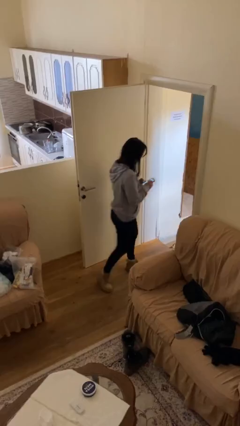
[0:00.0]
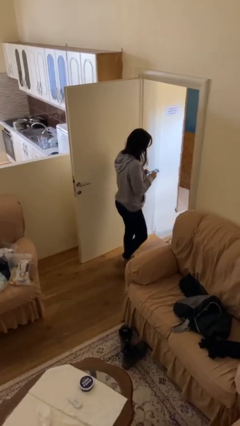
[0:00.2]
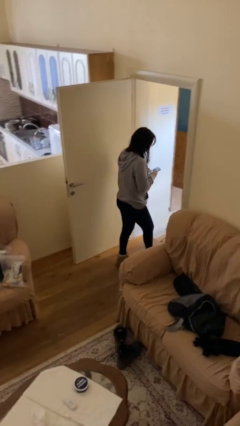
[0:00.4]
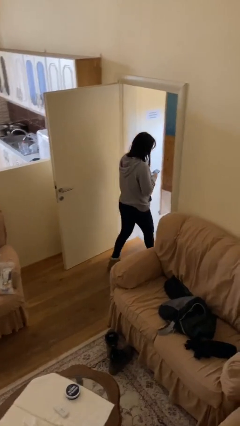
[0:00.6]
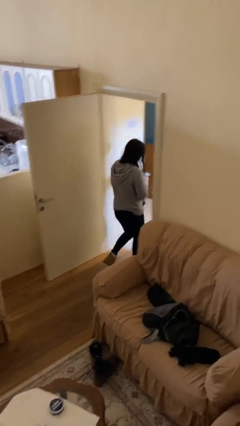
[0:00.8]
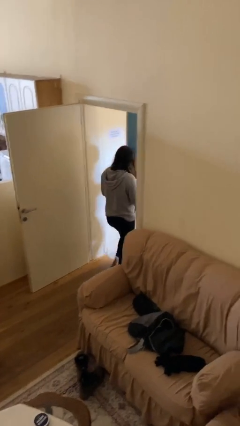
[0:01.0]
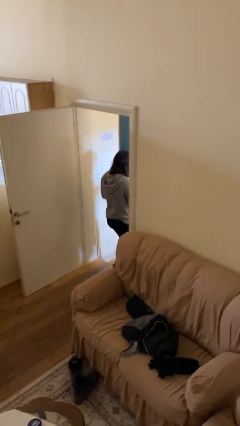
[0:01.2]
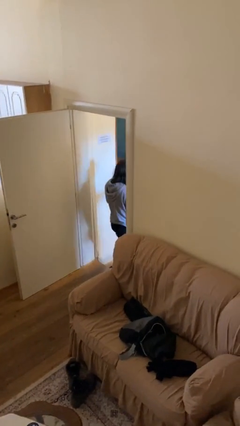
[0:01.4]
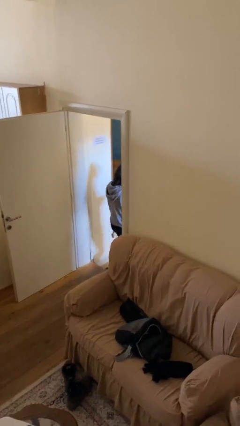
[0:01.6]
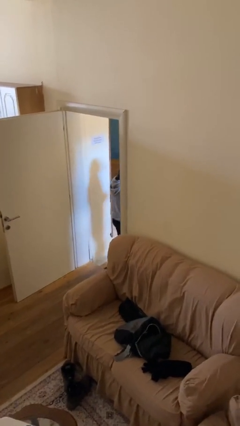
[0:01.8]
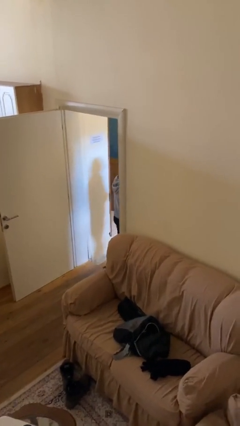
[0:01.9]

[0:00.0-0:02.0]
person exits scene through structure

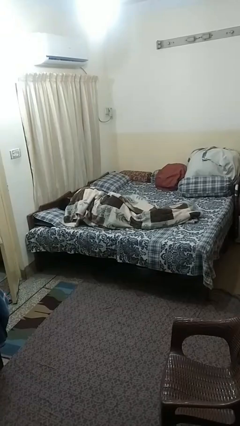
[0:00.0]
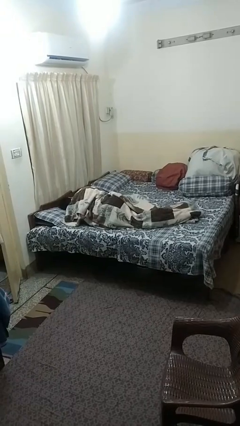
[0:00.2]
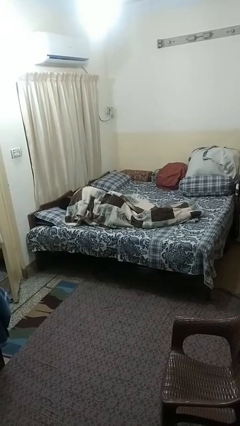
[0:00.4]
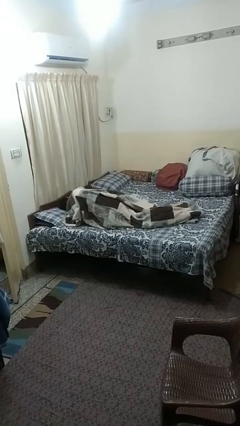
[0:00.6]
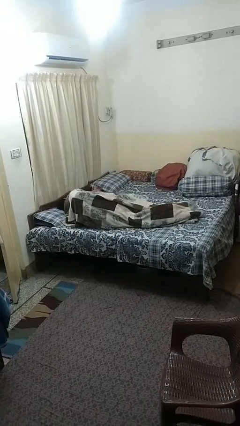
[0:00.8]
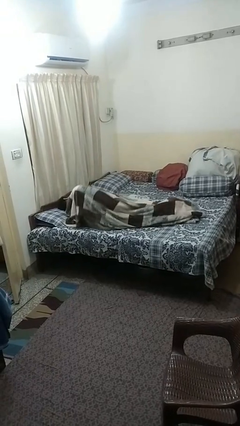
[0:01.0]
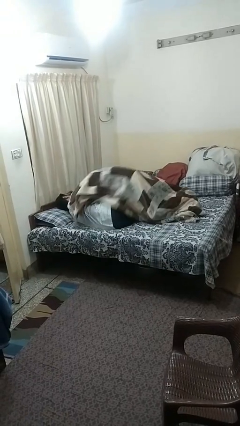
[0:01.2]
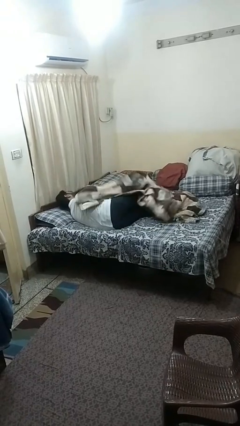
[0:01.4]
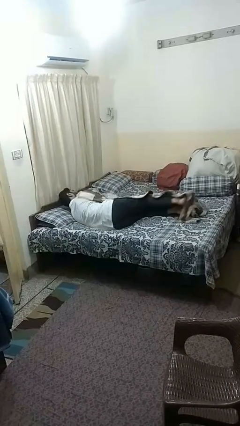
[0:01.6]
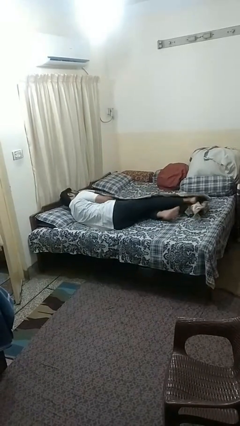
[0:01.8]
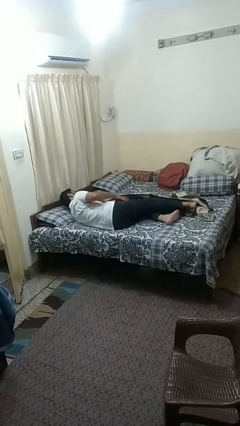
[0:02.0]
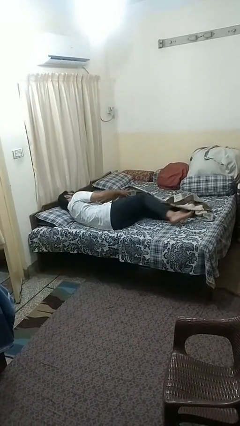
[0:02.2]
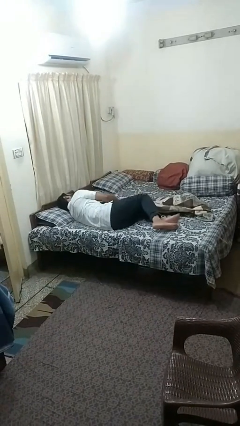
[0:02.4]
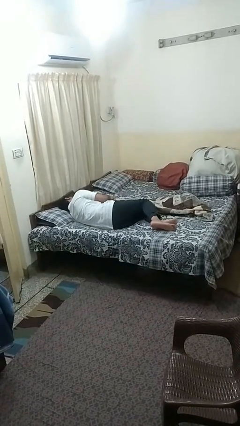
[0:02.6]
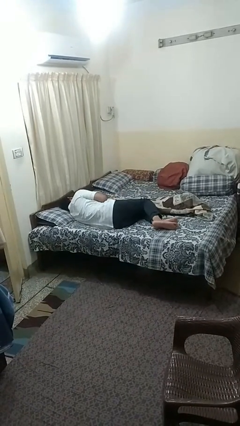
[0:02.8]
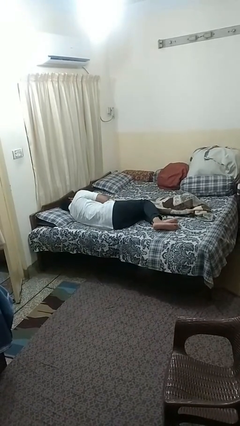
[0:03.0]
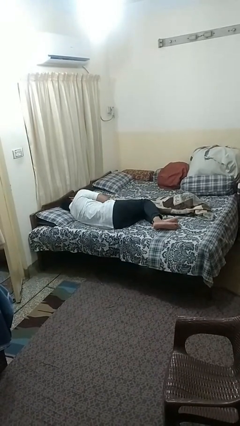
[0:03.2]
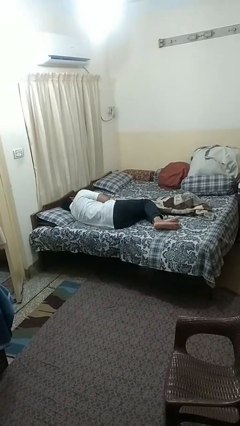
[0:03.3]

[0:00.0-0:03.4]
person uncovers with blanket

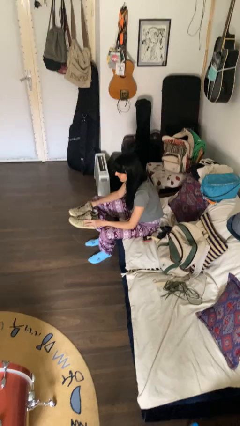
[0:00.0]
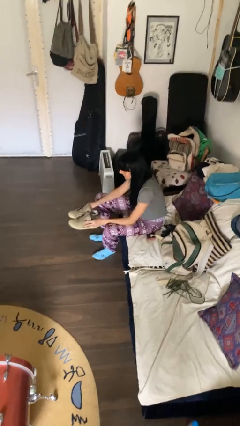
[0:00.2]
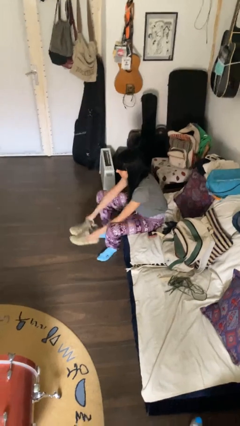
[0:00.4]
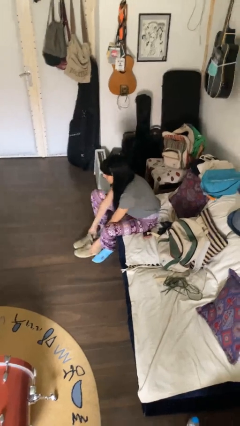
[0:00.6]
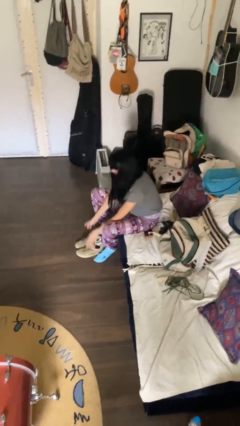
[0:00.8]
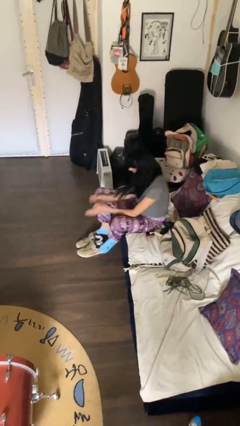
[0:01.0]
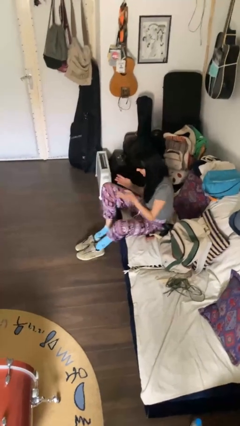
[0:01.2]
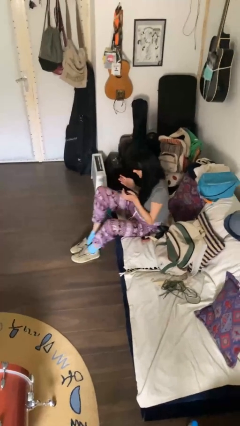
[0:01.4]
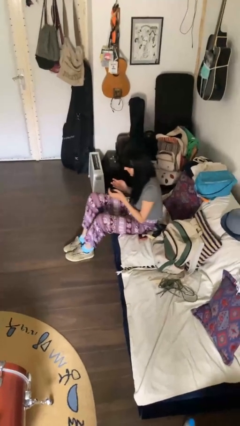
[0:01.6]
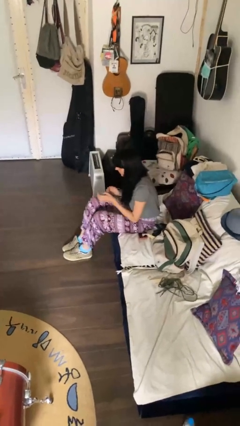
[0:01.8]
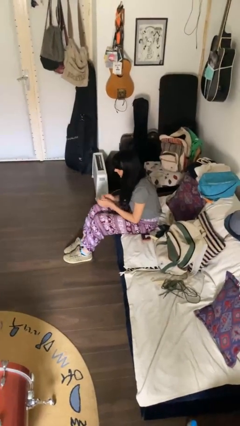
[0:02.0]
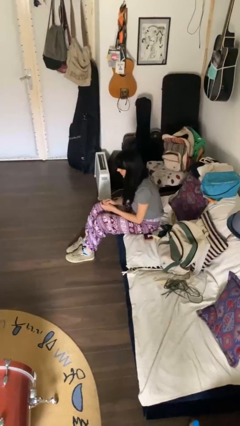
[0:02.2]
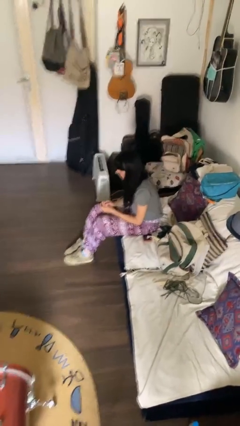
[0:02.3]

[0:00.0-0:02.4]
person puts on shoes

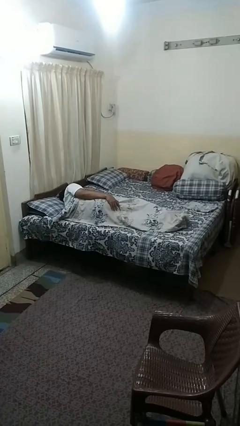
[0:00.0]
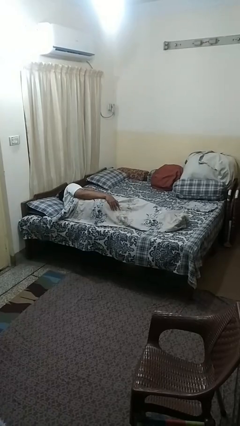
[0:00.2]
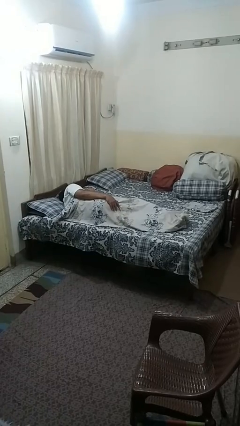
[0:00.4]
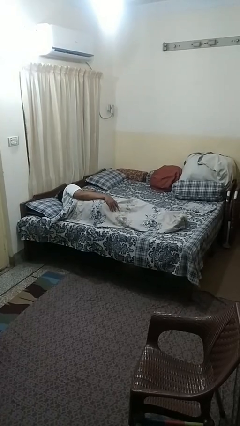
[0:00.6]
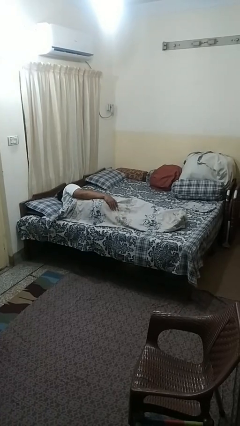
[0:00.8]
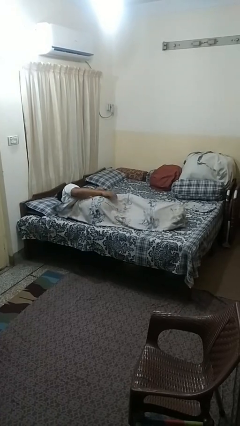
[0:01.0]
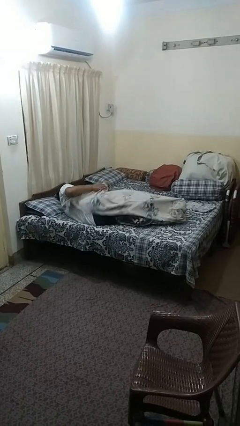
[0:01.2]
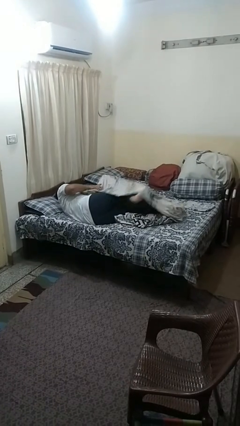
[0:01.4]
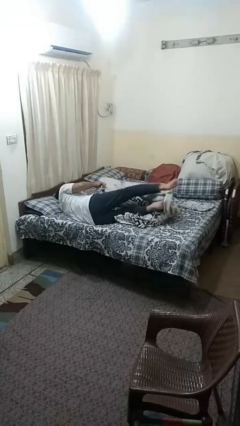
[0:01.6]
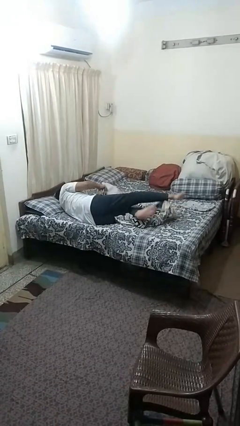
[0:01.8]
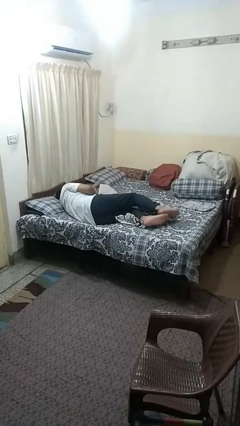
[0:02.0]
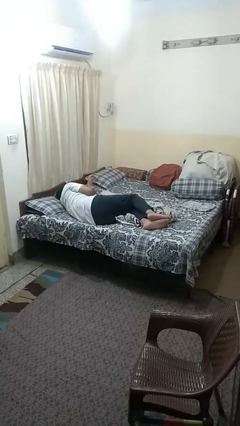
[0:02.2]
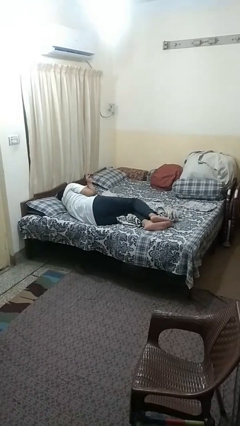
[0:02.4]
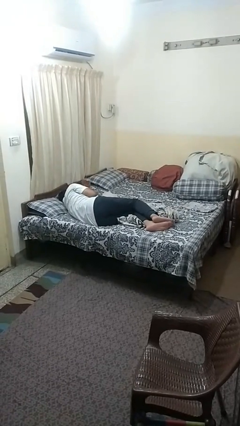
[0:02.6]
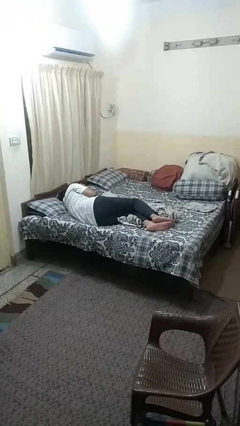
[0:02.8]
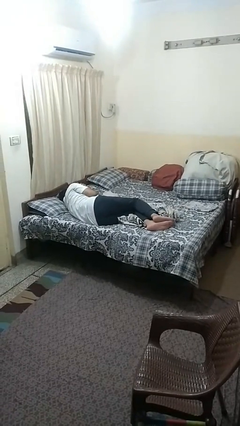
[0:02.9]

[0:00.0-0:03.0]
person uncovers with bedsheets

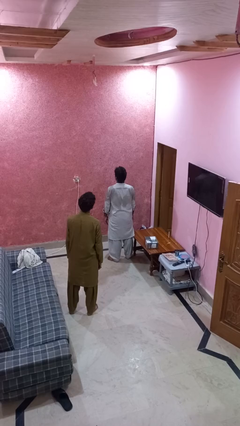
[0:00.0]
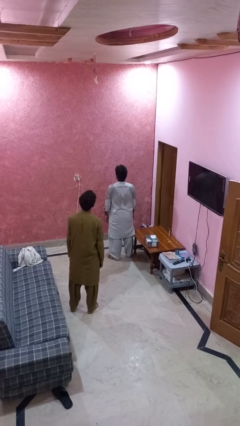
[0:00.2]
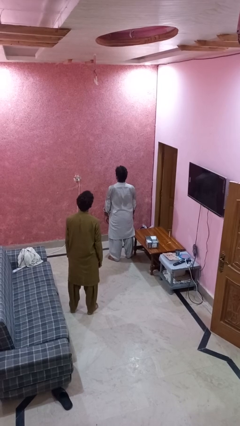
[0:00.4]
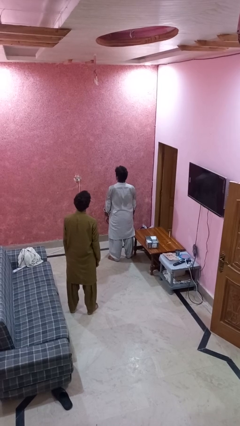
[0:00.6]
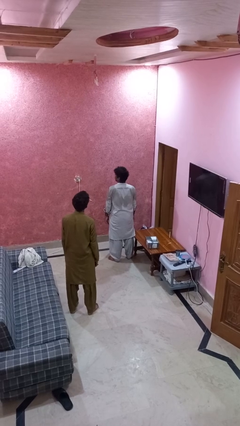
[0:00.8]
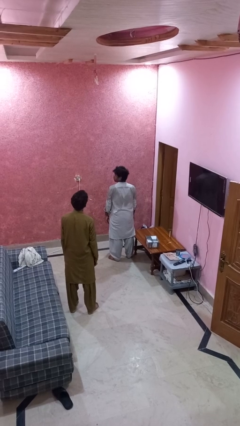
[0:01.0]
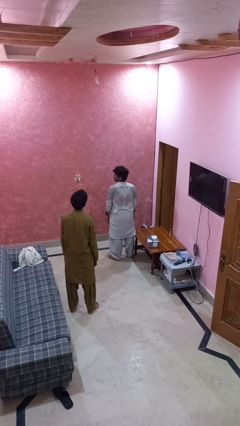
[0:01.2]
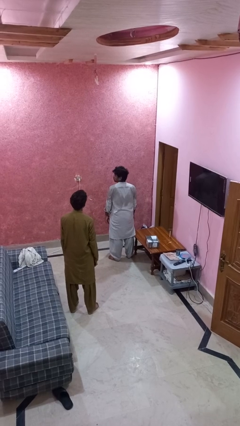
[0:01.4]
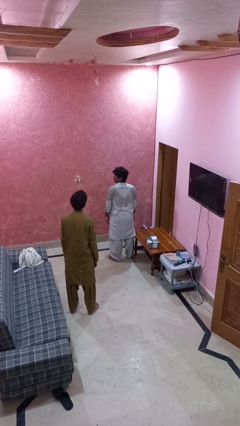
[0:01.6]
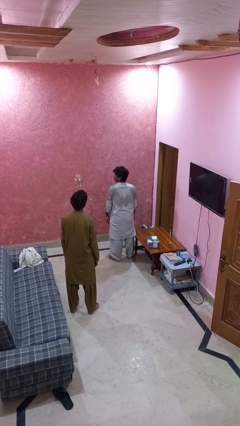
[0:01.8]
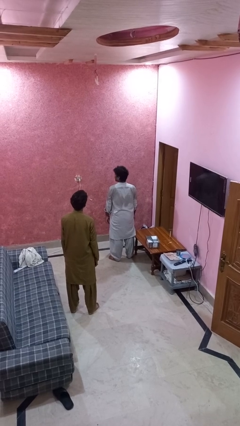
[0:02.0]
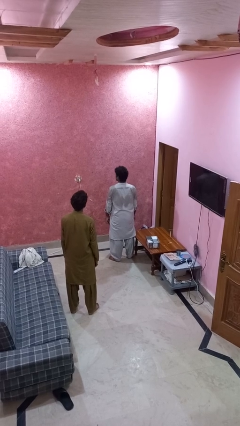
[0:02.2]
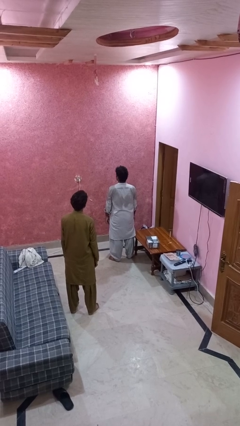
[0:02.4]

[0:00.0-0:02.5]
person looks over shoulder

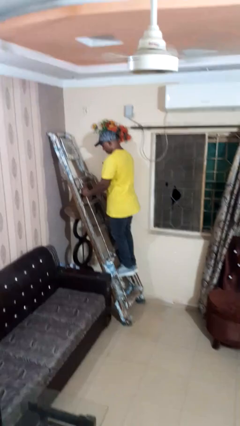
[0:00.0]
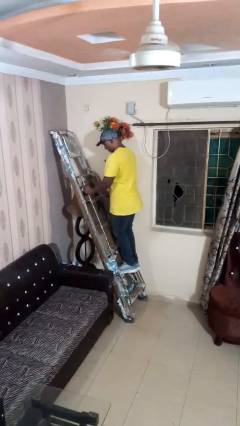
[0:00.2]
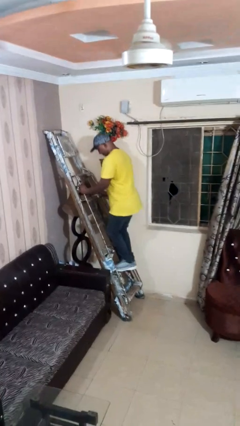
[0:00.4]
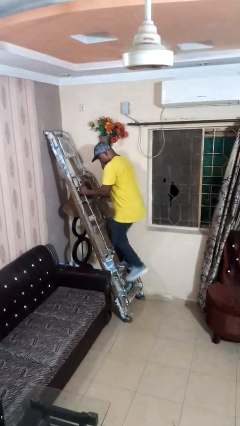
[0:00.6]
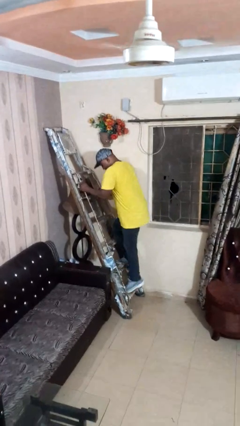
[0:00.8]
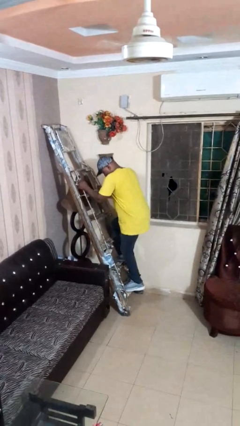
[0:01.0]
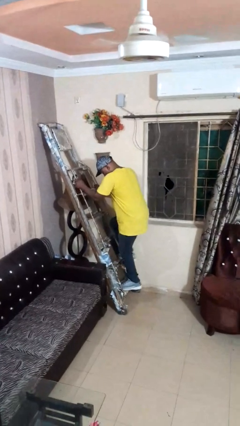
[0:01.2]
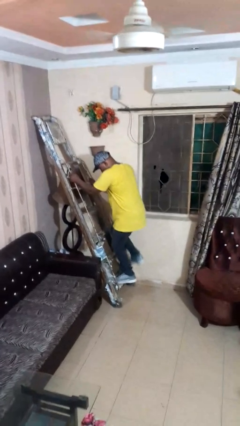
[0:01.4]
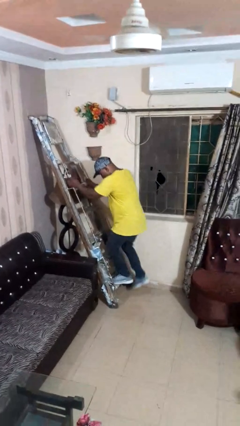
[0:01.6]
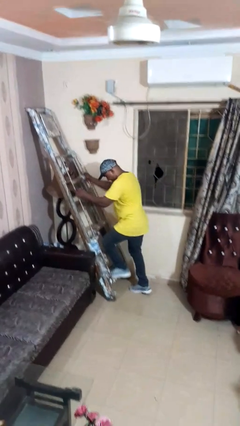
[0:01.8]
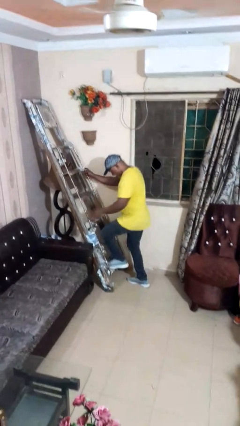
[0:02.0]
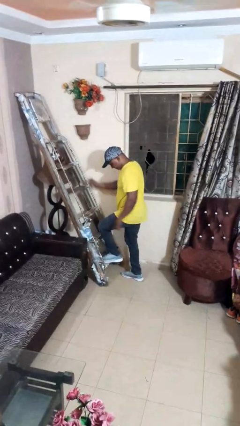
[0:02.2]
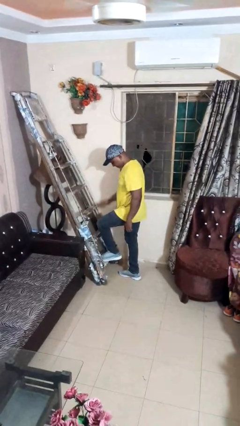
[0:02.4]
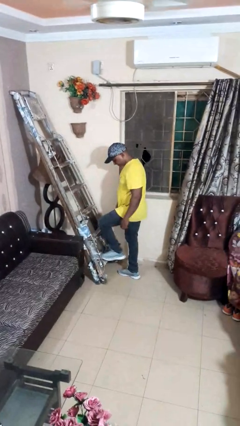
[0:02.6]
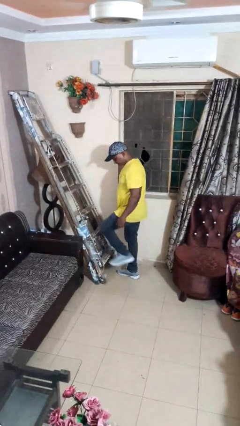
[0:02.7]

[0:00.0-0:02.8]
person climbs down ladder

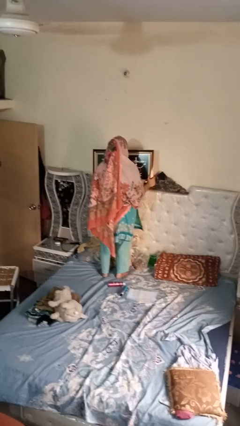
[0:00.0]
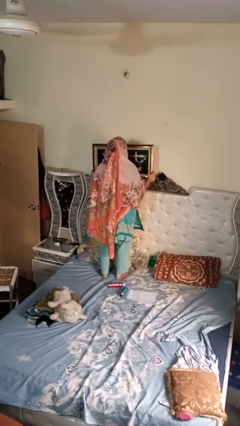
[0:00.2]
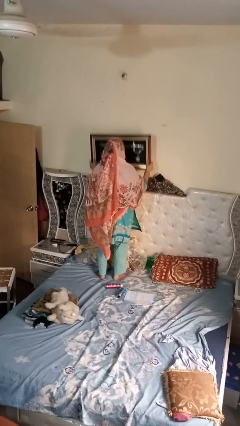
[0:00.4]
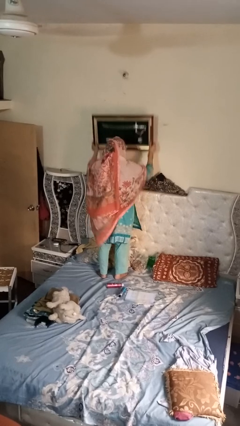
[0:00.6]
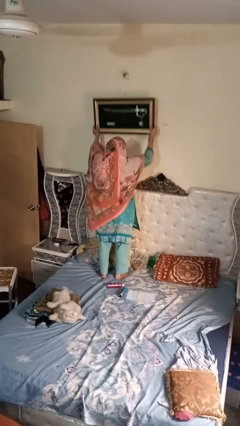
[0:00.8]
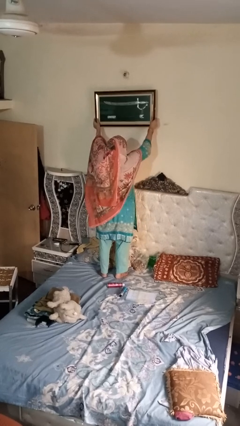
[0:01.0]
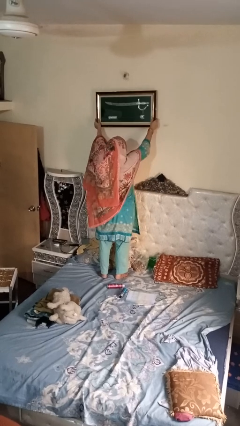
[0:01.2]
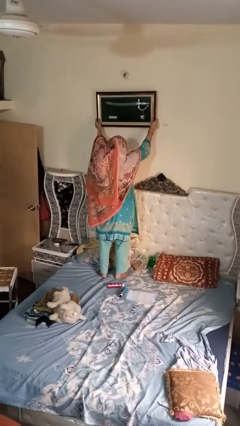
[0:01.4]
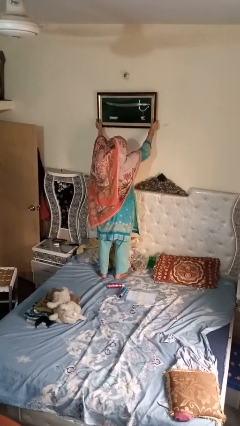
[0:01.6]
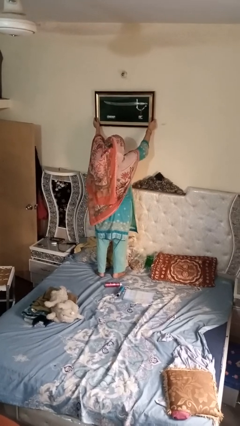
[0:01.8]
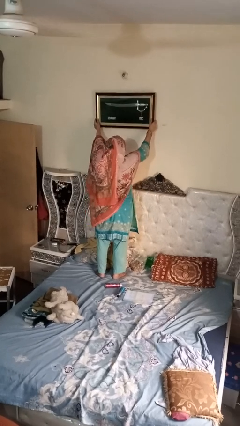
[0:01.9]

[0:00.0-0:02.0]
person takes down picture frame
